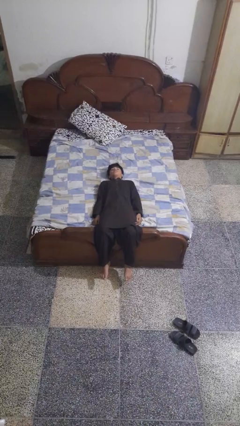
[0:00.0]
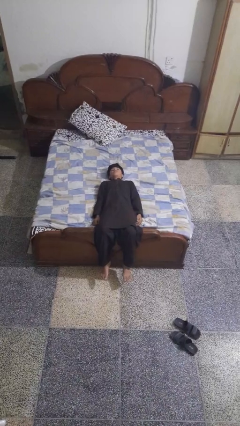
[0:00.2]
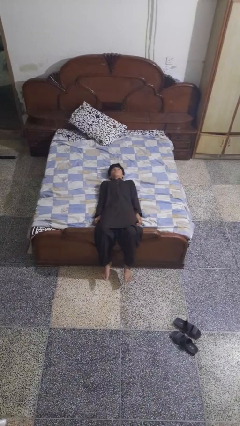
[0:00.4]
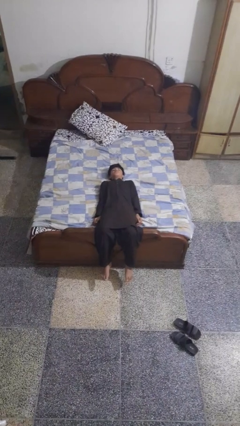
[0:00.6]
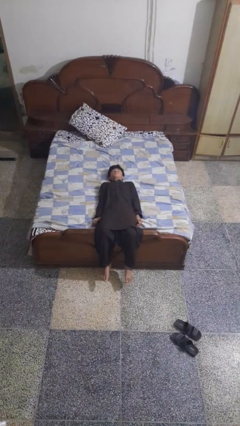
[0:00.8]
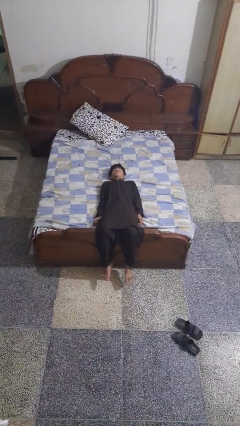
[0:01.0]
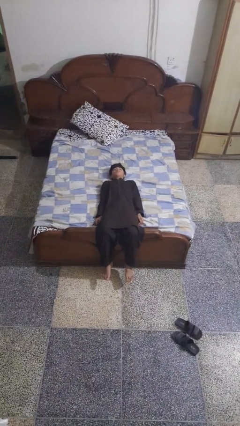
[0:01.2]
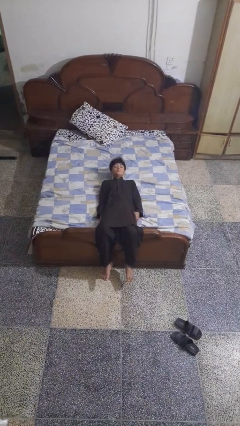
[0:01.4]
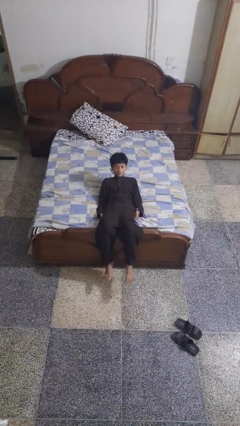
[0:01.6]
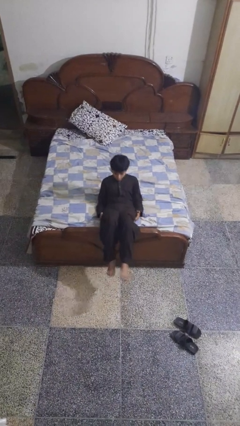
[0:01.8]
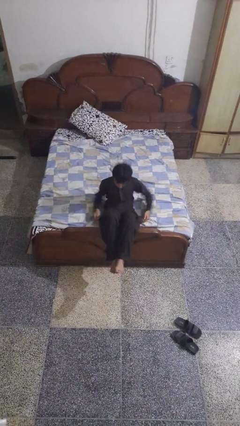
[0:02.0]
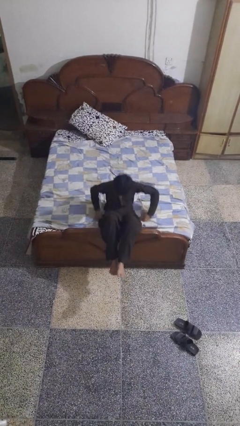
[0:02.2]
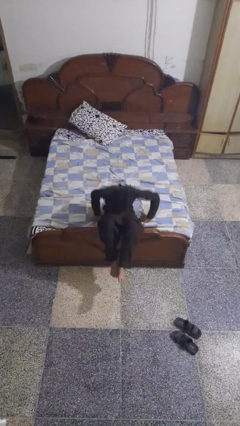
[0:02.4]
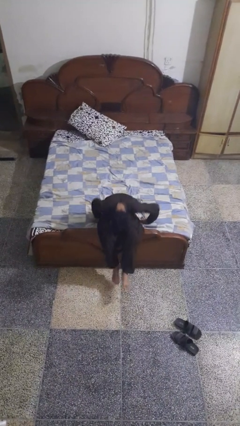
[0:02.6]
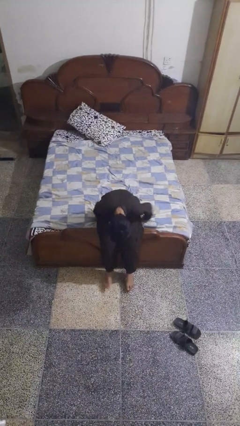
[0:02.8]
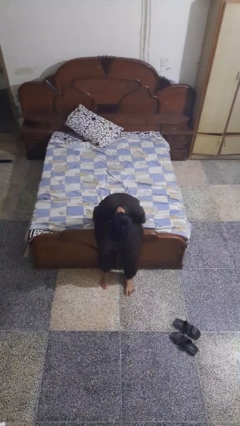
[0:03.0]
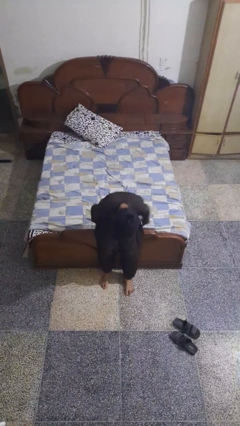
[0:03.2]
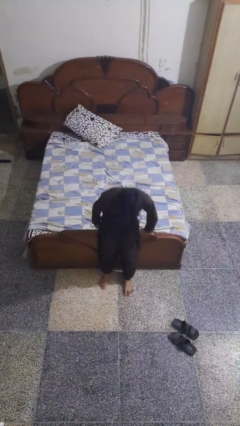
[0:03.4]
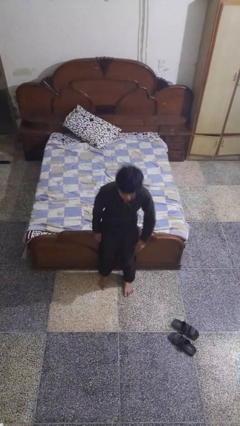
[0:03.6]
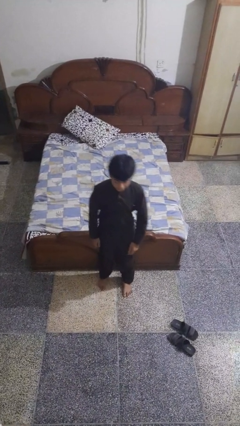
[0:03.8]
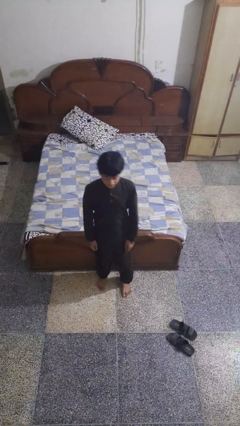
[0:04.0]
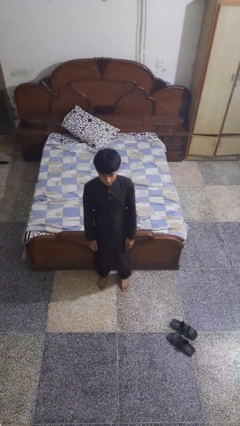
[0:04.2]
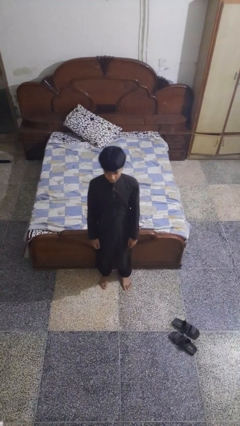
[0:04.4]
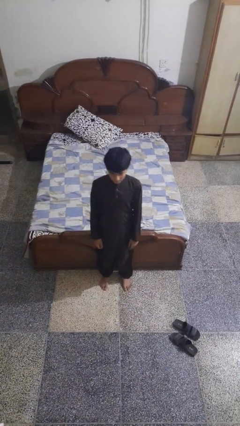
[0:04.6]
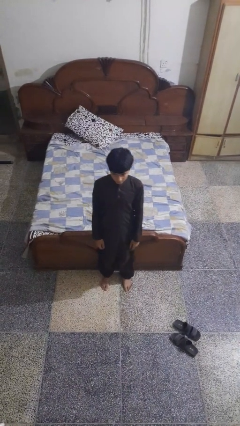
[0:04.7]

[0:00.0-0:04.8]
person stands up

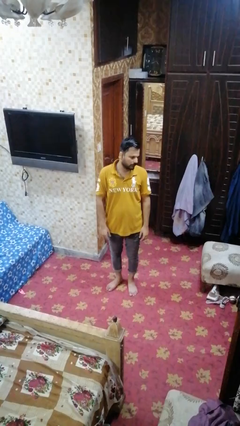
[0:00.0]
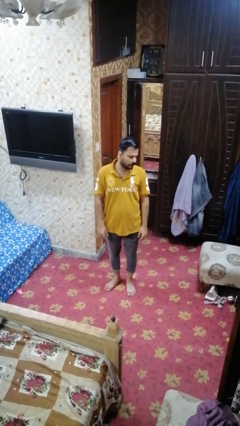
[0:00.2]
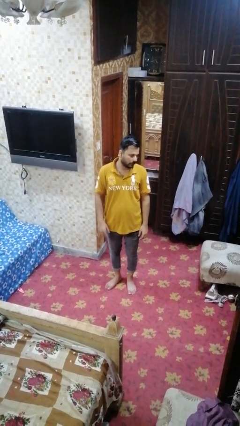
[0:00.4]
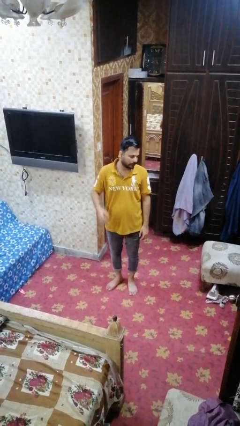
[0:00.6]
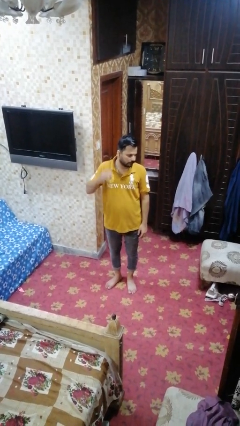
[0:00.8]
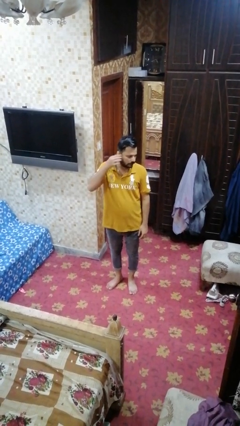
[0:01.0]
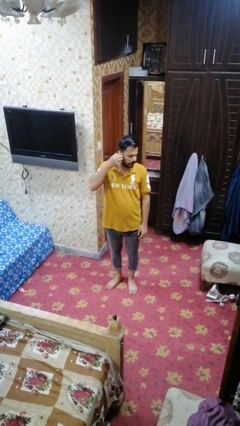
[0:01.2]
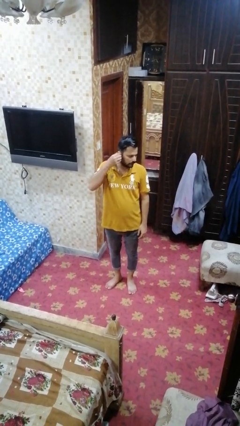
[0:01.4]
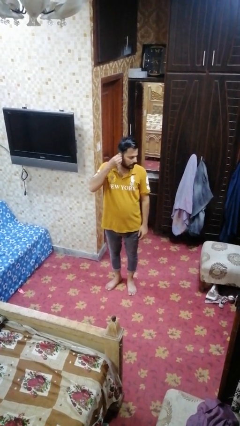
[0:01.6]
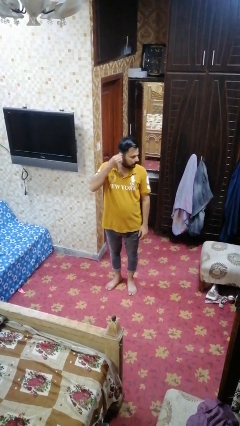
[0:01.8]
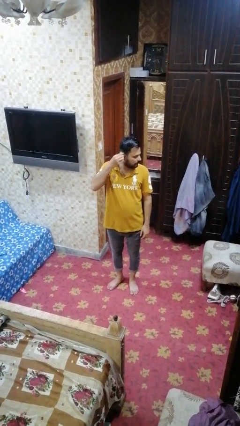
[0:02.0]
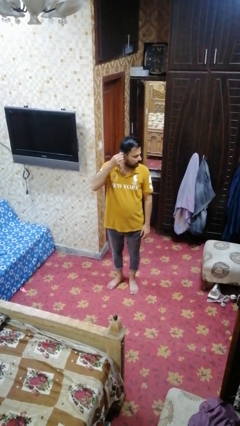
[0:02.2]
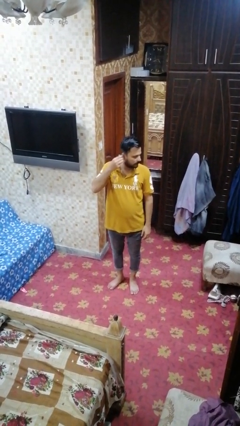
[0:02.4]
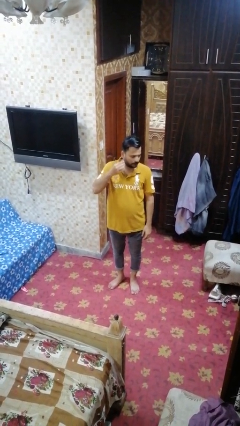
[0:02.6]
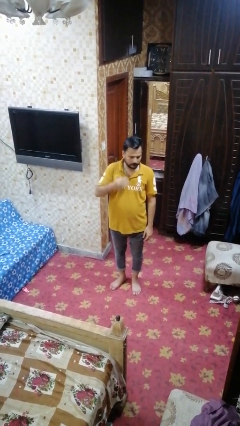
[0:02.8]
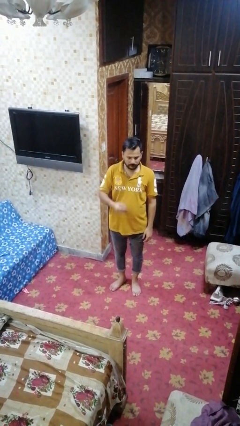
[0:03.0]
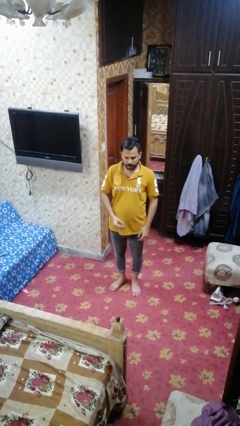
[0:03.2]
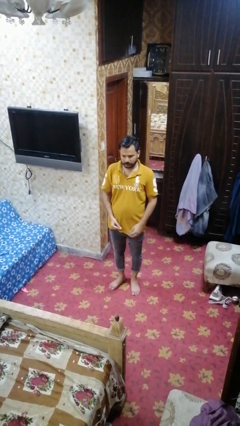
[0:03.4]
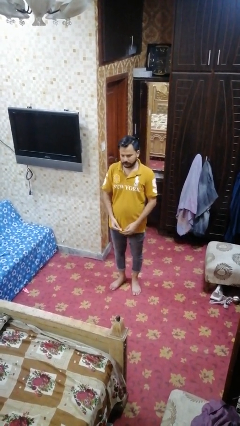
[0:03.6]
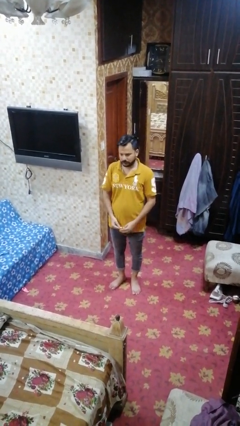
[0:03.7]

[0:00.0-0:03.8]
person takes off earrings

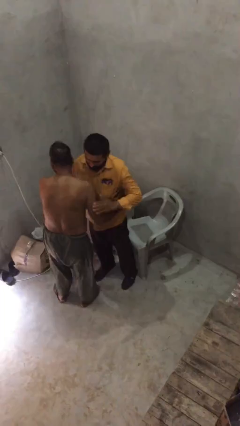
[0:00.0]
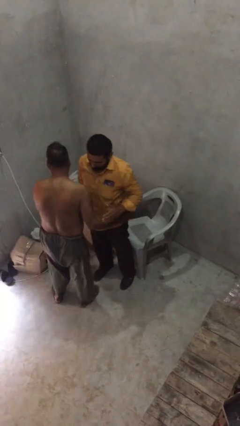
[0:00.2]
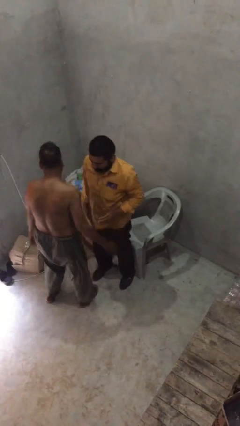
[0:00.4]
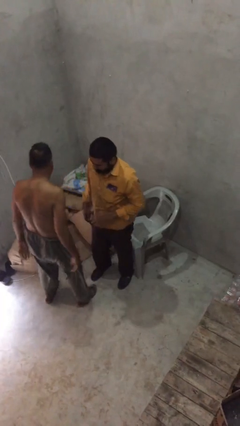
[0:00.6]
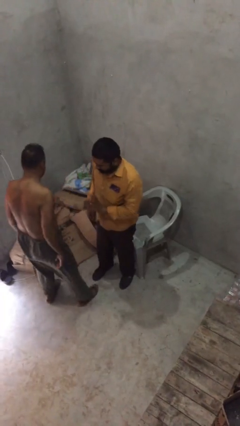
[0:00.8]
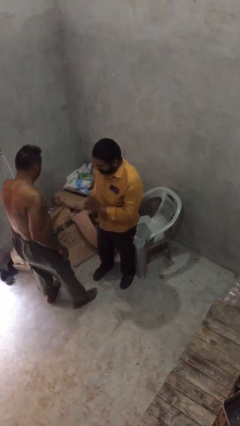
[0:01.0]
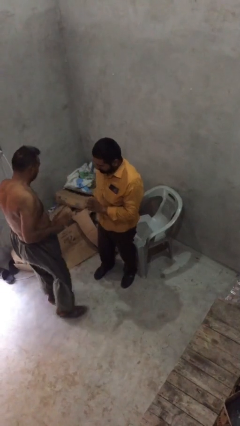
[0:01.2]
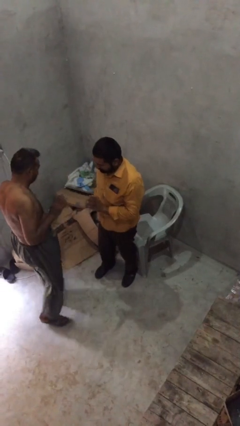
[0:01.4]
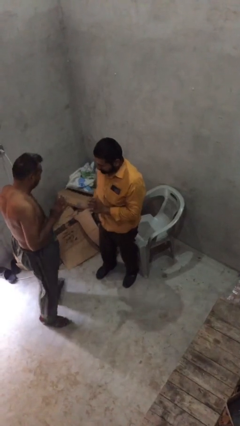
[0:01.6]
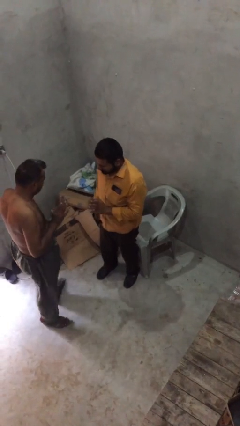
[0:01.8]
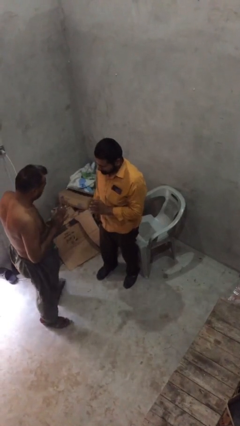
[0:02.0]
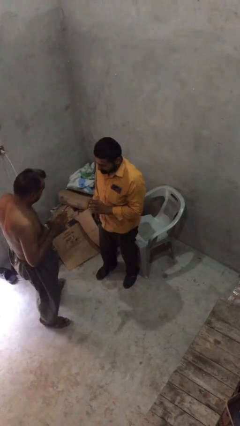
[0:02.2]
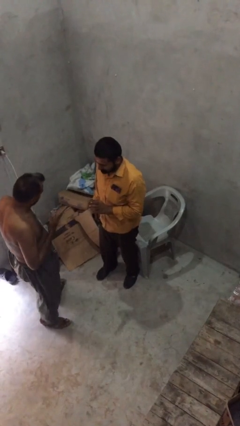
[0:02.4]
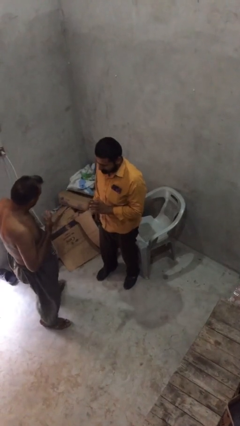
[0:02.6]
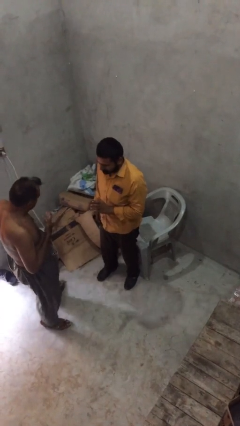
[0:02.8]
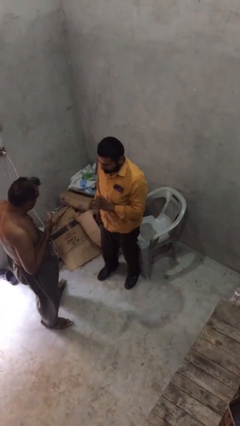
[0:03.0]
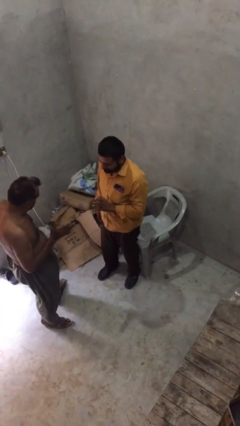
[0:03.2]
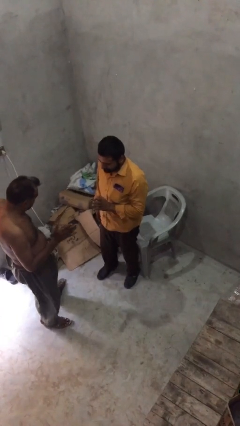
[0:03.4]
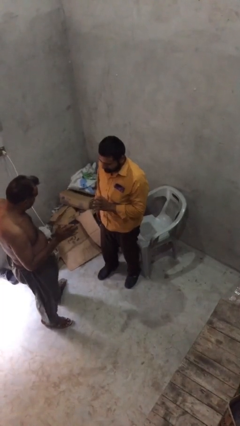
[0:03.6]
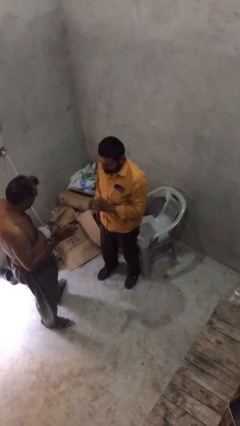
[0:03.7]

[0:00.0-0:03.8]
person talks to person

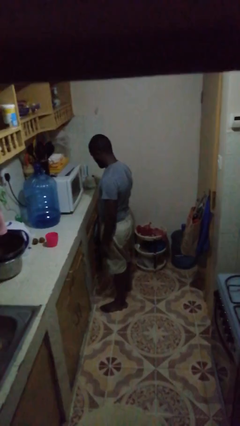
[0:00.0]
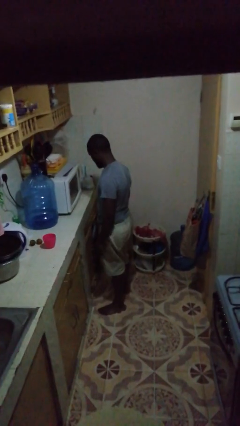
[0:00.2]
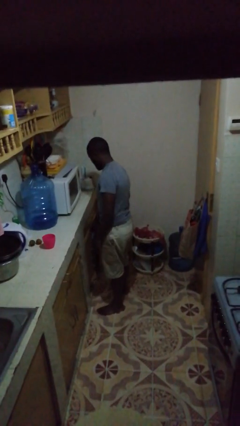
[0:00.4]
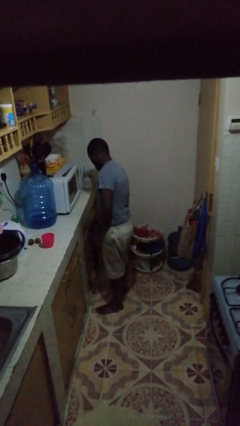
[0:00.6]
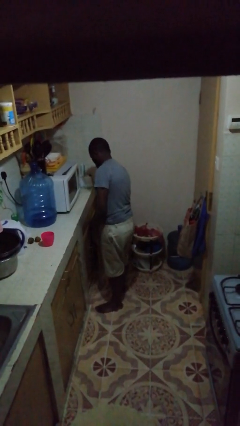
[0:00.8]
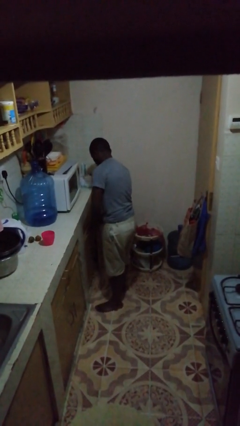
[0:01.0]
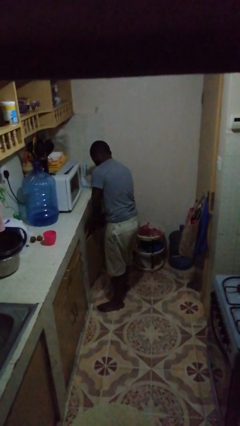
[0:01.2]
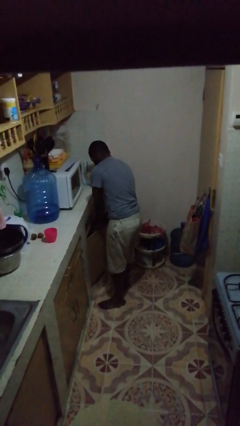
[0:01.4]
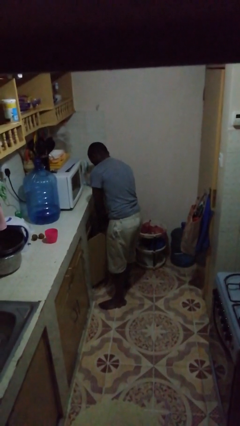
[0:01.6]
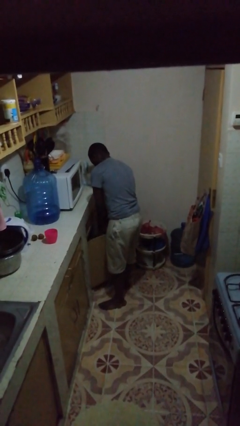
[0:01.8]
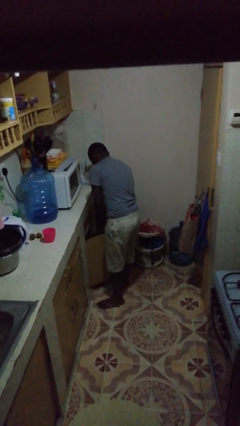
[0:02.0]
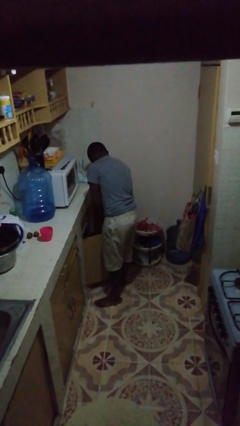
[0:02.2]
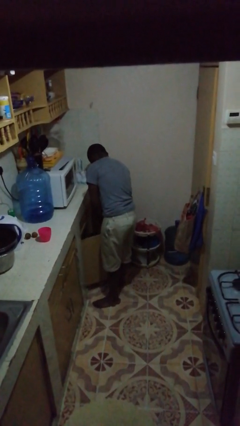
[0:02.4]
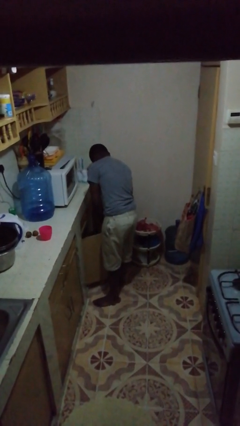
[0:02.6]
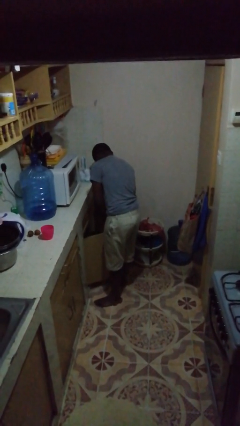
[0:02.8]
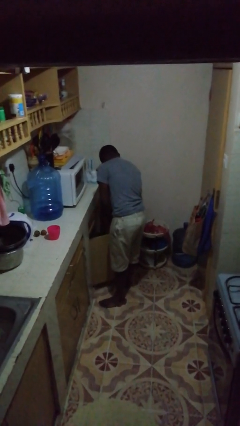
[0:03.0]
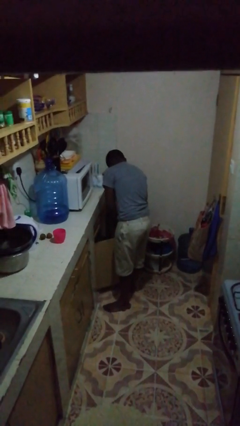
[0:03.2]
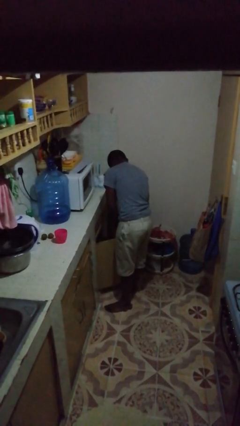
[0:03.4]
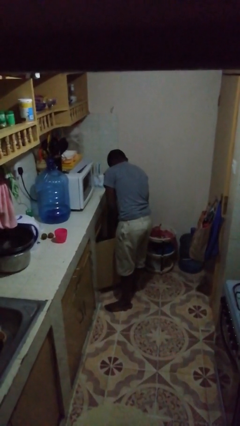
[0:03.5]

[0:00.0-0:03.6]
person opens cabinet

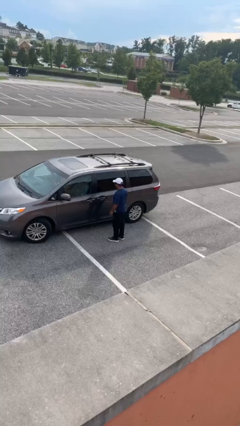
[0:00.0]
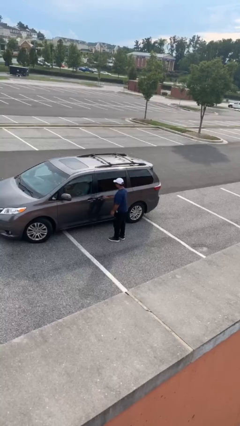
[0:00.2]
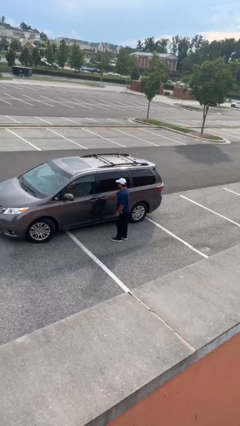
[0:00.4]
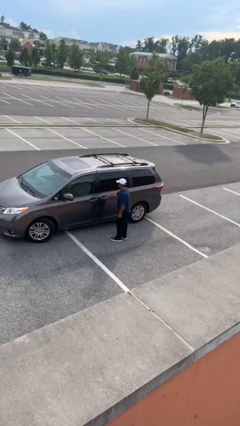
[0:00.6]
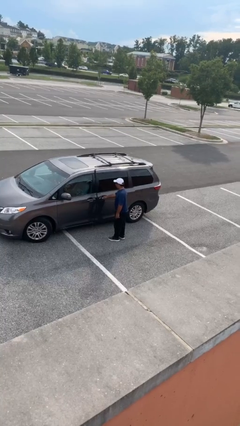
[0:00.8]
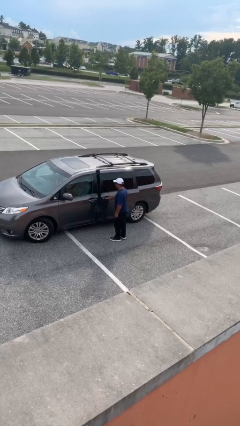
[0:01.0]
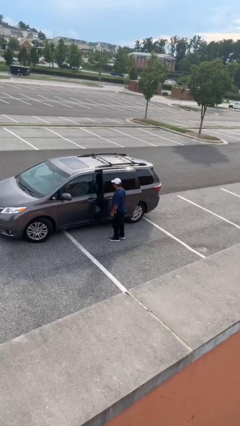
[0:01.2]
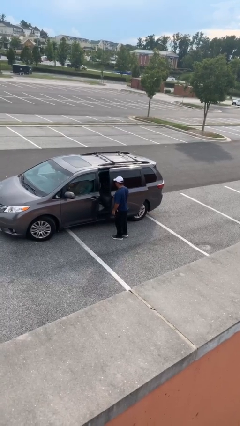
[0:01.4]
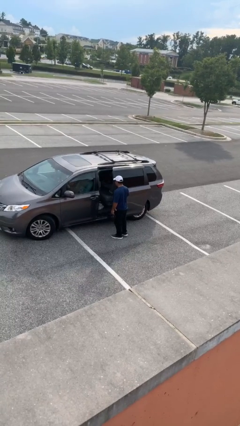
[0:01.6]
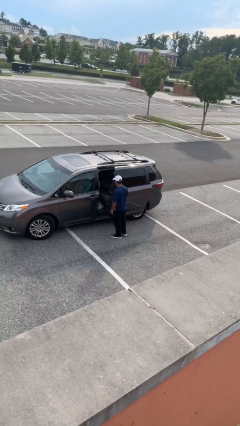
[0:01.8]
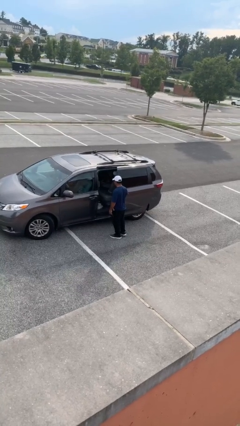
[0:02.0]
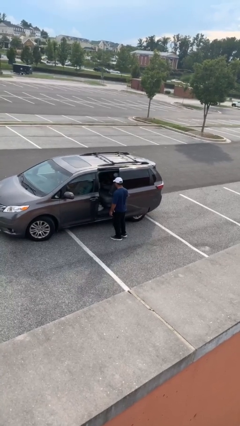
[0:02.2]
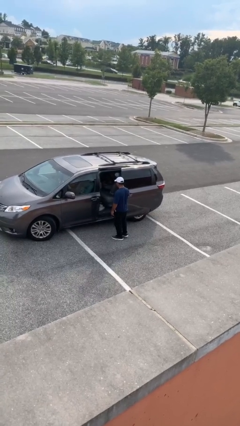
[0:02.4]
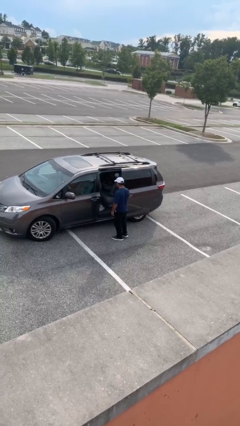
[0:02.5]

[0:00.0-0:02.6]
person opens car door
